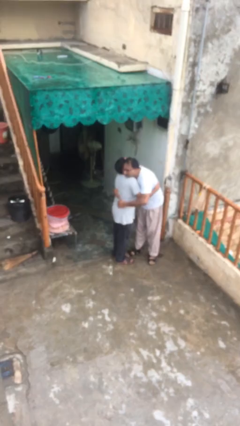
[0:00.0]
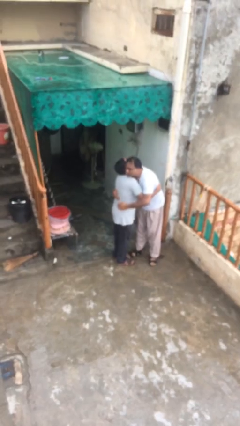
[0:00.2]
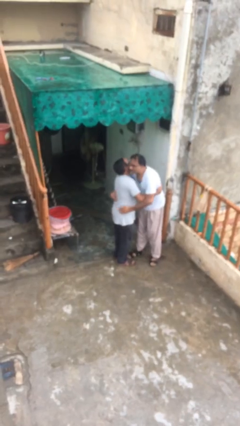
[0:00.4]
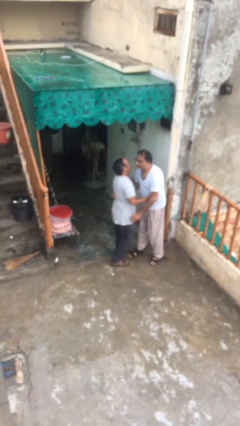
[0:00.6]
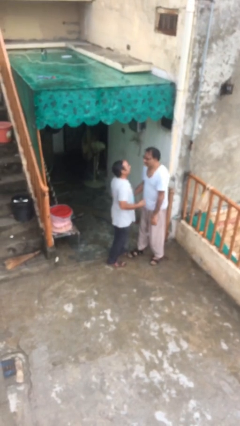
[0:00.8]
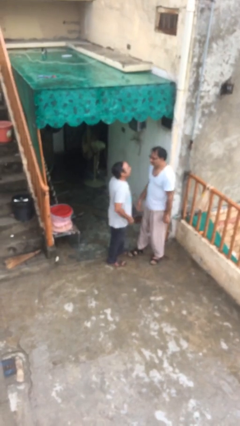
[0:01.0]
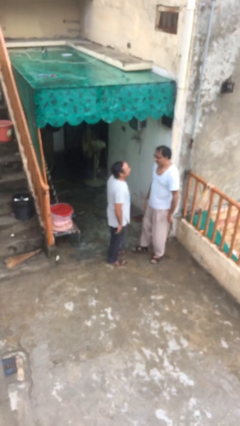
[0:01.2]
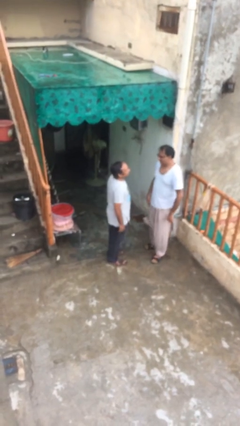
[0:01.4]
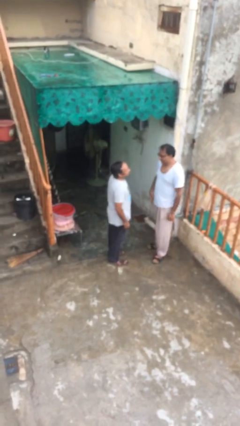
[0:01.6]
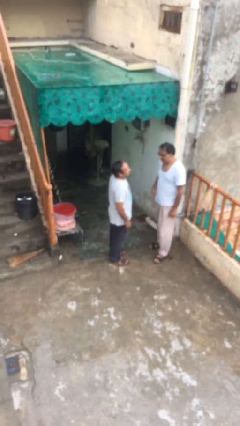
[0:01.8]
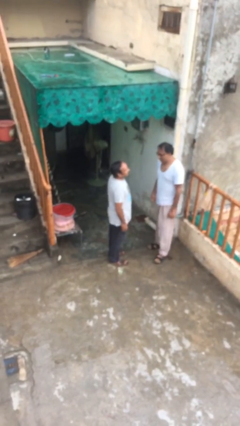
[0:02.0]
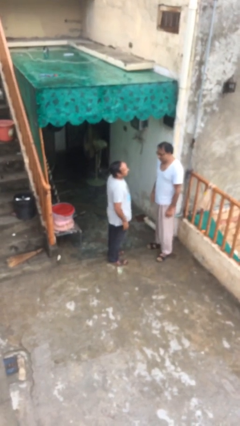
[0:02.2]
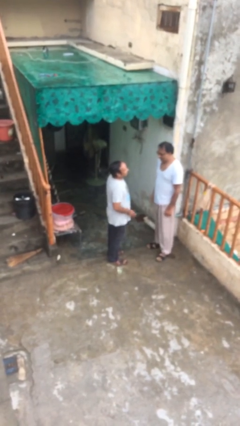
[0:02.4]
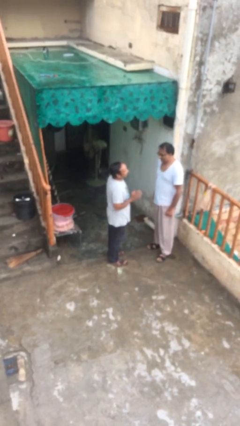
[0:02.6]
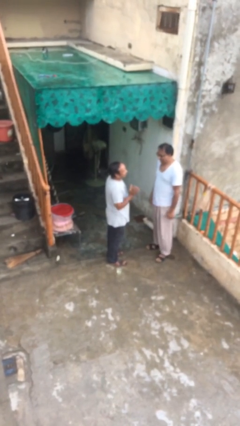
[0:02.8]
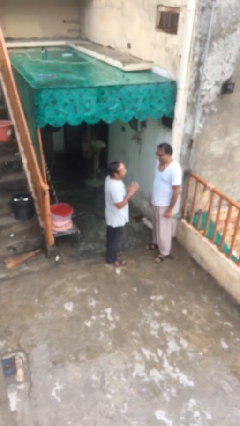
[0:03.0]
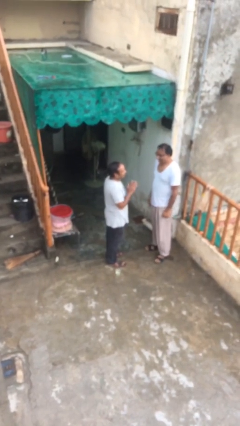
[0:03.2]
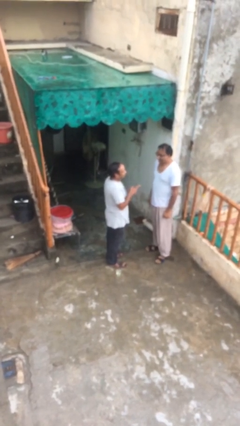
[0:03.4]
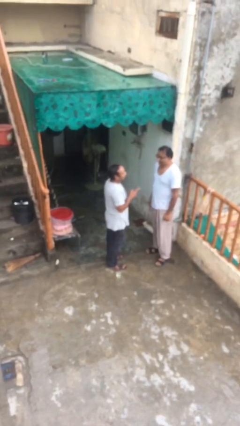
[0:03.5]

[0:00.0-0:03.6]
person talks to person

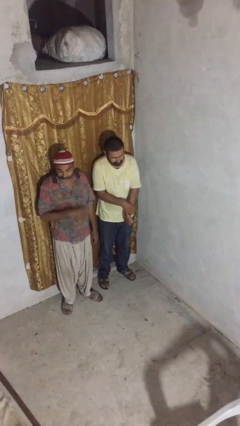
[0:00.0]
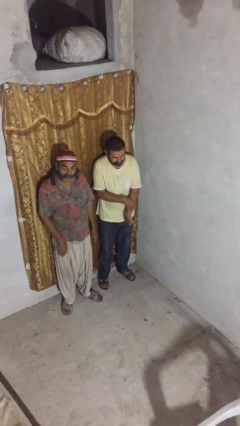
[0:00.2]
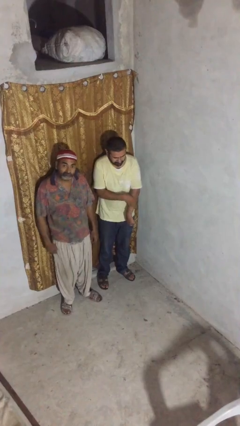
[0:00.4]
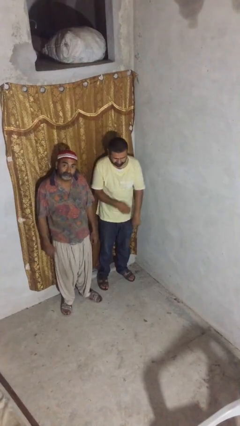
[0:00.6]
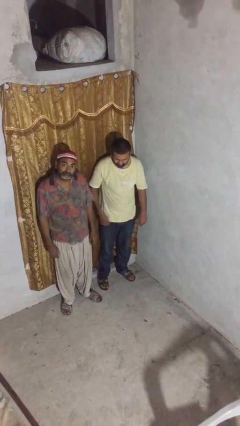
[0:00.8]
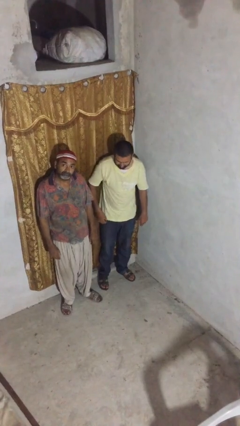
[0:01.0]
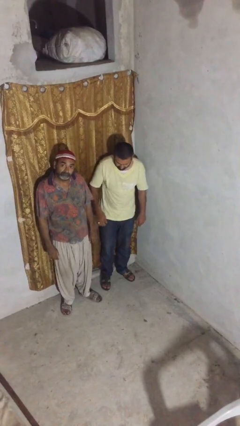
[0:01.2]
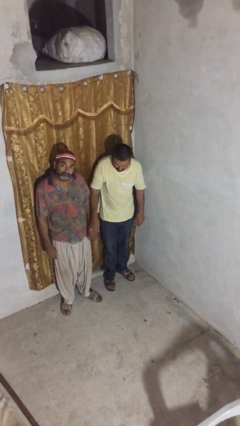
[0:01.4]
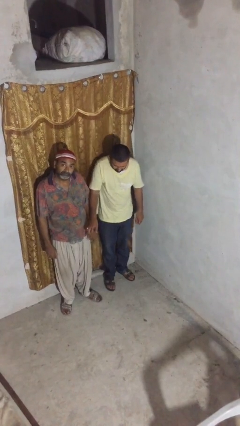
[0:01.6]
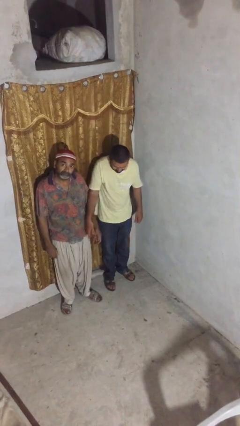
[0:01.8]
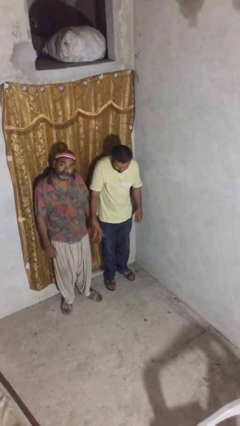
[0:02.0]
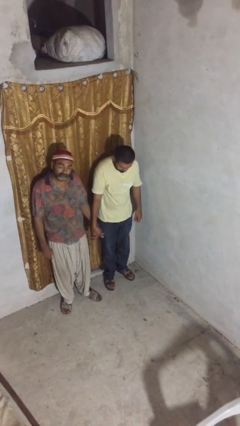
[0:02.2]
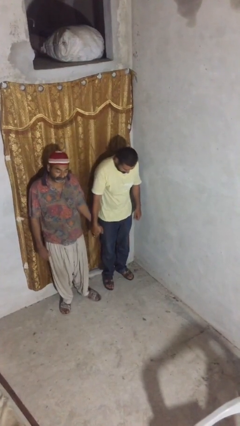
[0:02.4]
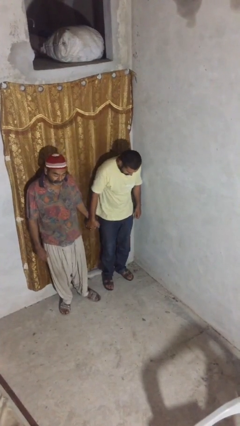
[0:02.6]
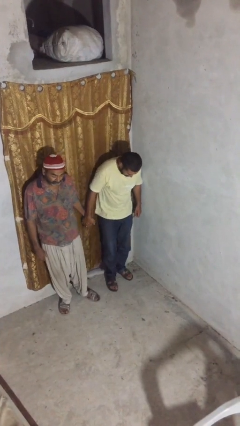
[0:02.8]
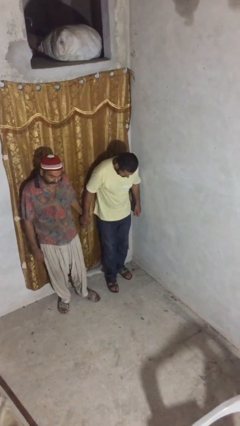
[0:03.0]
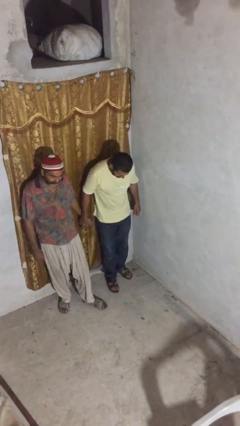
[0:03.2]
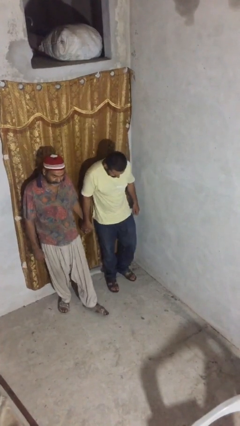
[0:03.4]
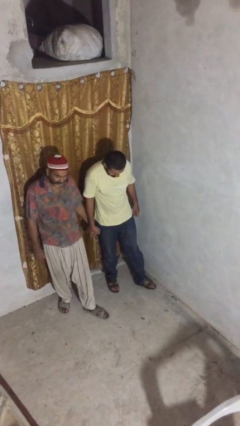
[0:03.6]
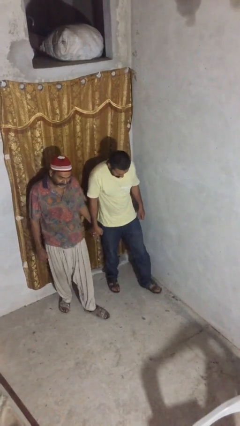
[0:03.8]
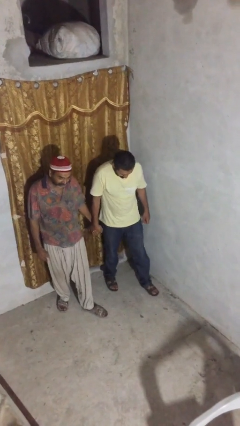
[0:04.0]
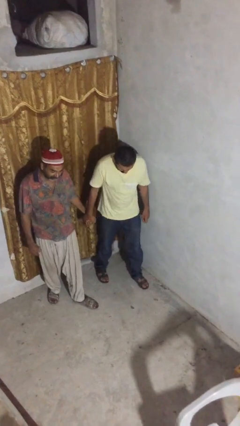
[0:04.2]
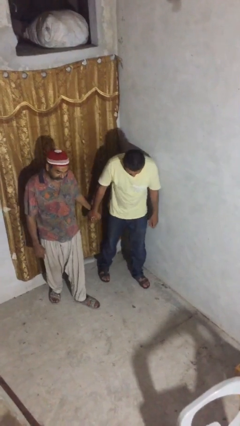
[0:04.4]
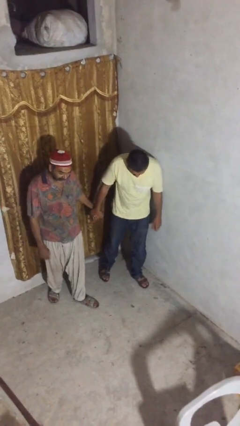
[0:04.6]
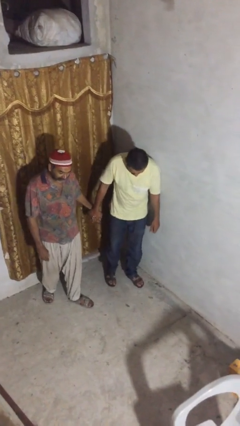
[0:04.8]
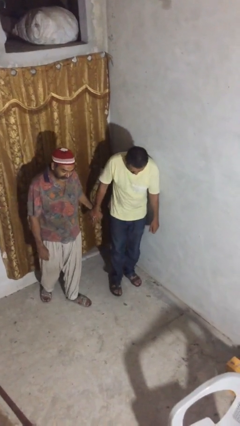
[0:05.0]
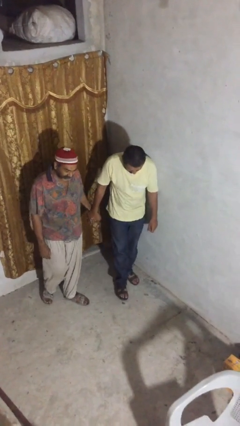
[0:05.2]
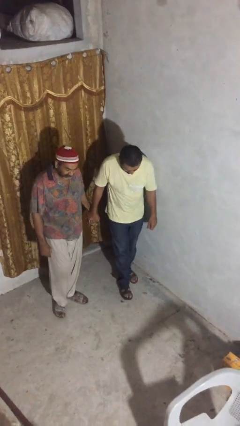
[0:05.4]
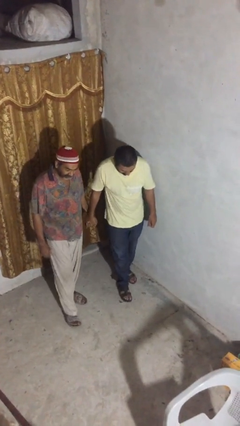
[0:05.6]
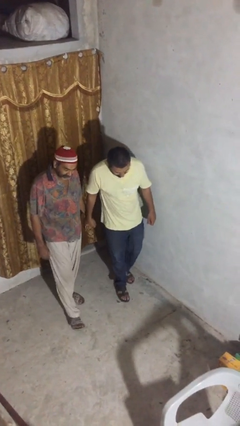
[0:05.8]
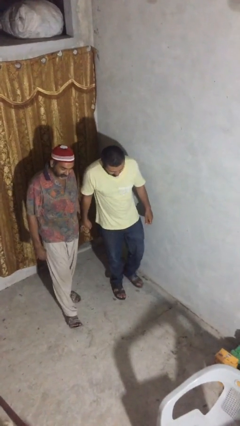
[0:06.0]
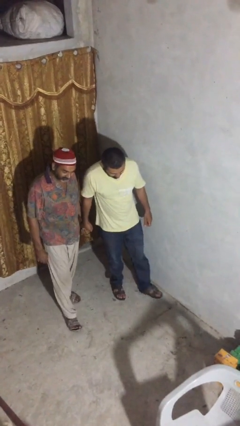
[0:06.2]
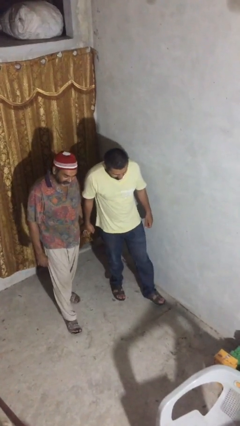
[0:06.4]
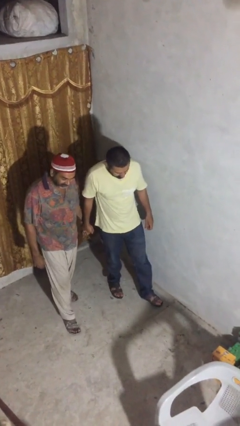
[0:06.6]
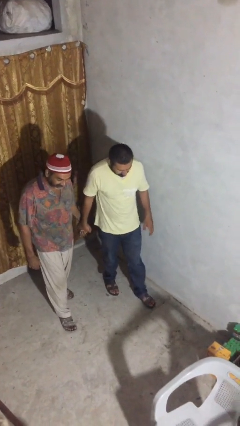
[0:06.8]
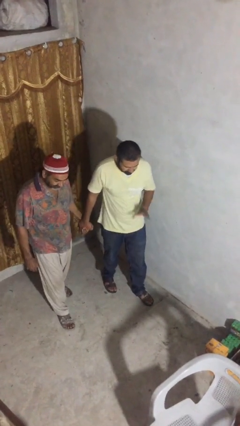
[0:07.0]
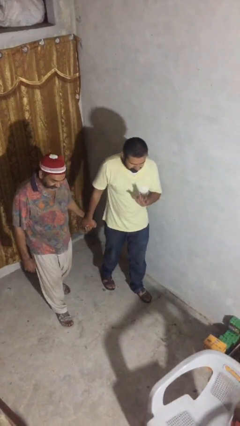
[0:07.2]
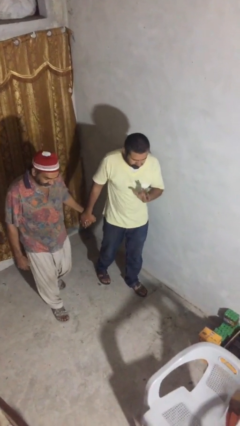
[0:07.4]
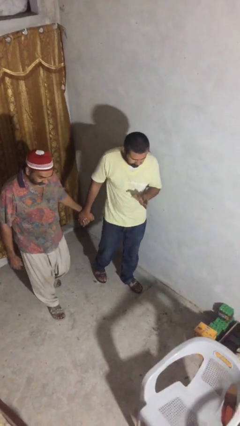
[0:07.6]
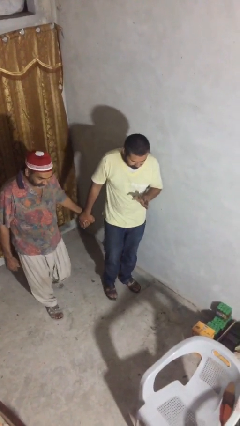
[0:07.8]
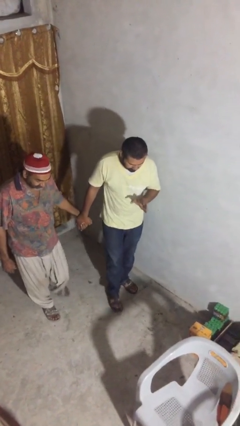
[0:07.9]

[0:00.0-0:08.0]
person holds hand

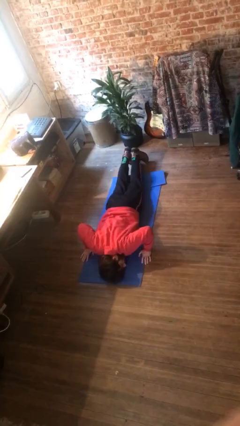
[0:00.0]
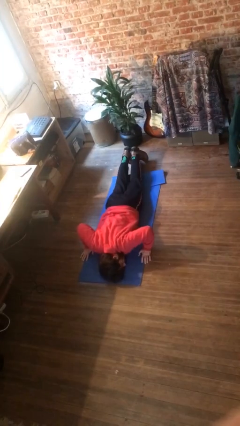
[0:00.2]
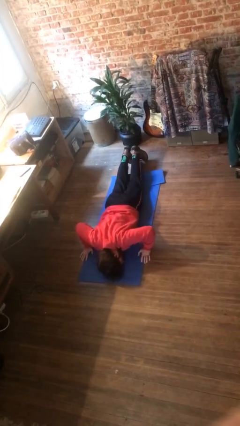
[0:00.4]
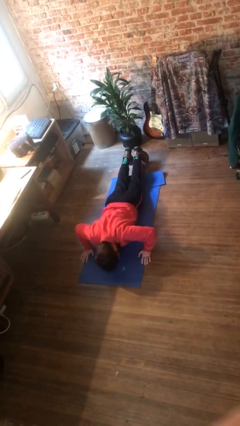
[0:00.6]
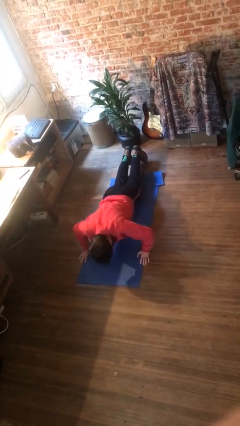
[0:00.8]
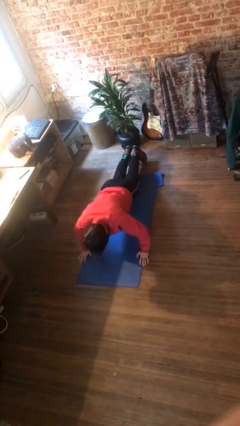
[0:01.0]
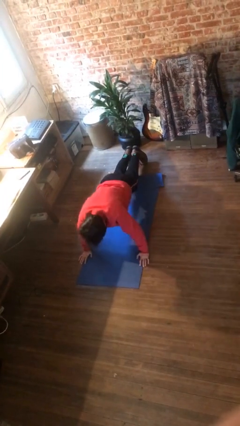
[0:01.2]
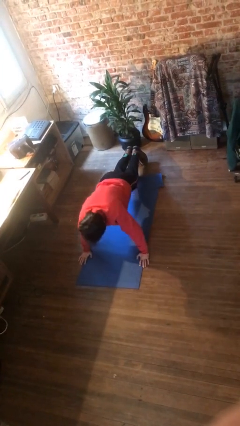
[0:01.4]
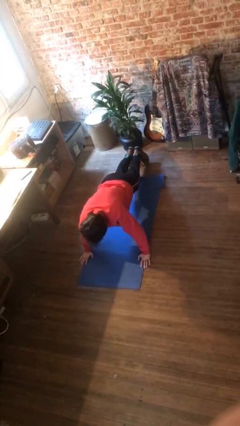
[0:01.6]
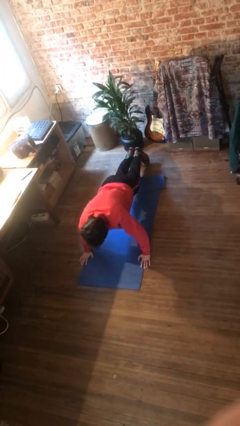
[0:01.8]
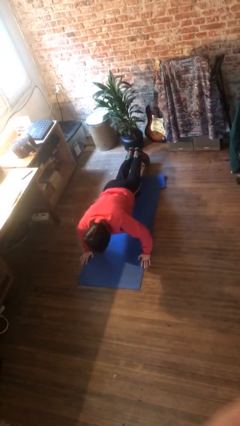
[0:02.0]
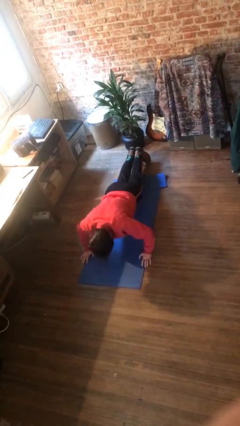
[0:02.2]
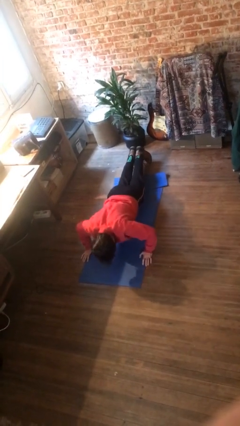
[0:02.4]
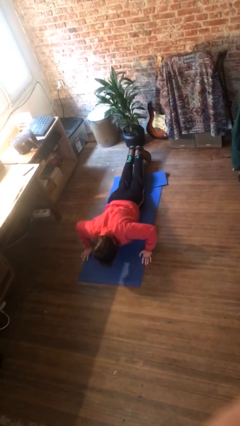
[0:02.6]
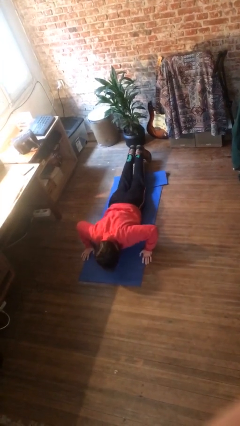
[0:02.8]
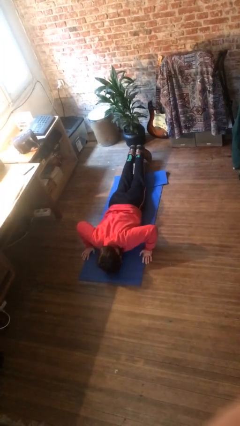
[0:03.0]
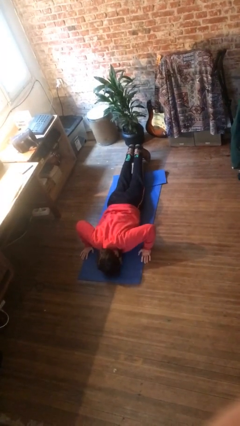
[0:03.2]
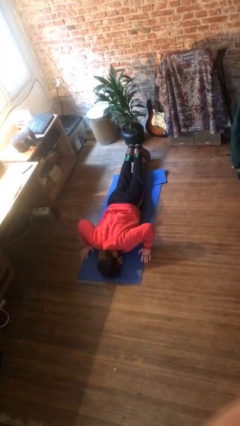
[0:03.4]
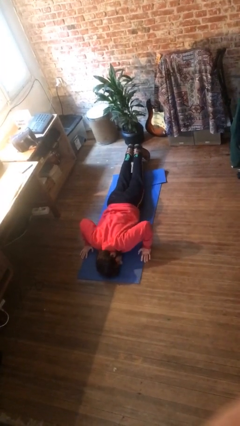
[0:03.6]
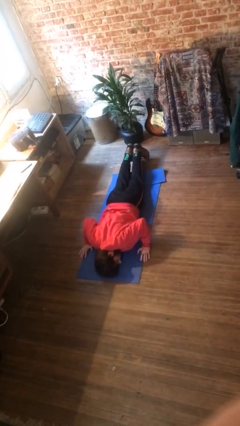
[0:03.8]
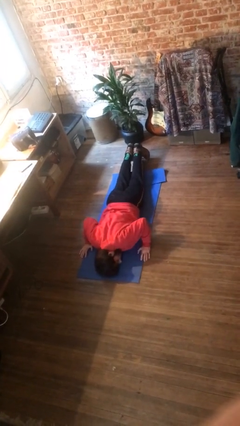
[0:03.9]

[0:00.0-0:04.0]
person exercises with pushup

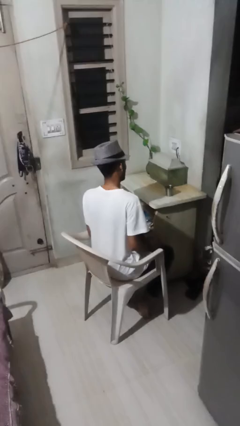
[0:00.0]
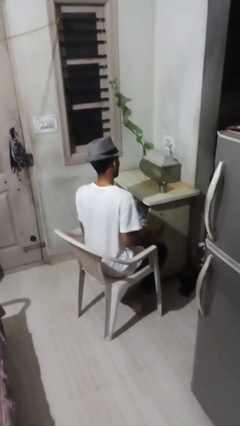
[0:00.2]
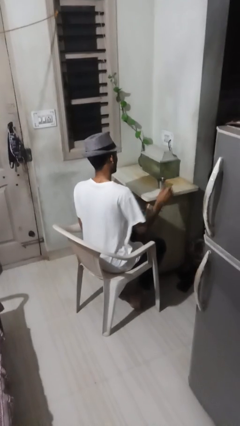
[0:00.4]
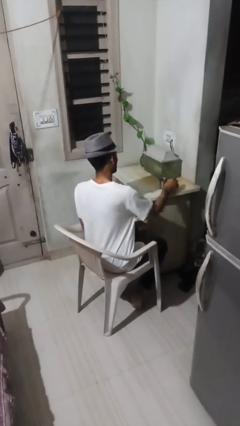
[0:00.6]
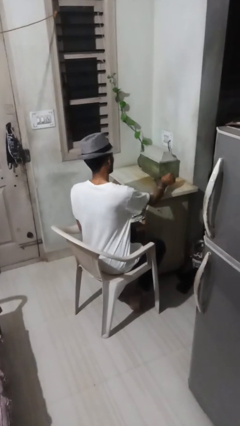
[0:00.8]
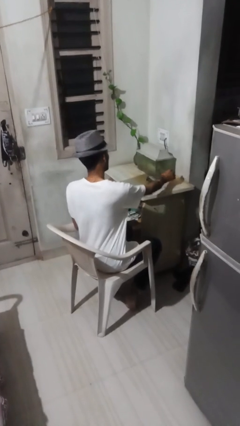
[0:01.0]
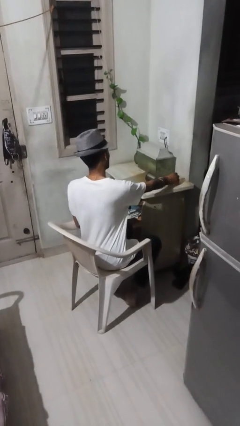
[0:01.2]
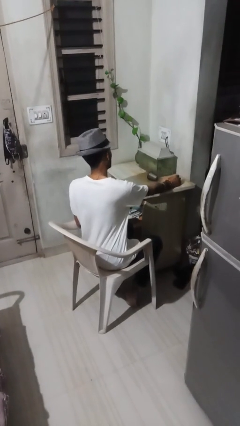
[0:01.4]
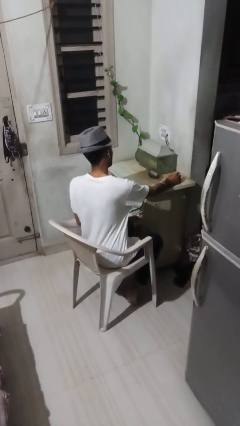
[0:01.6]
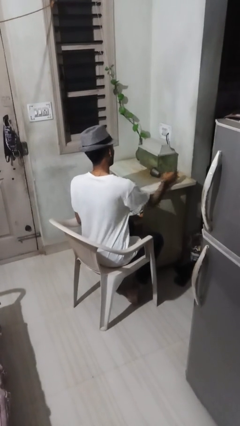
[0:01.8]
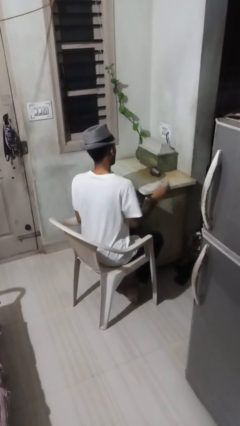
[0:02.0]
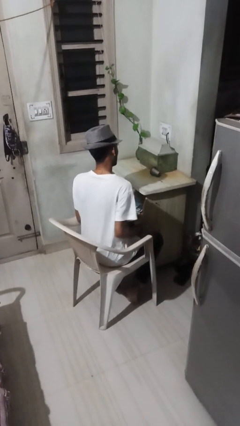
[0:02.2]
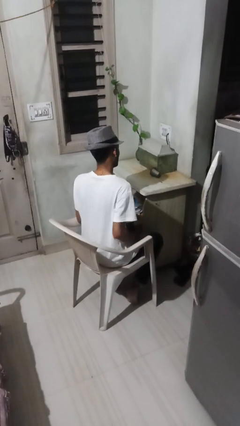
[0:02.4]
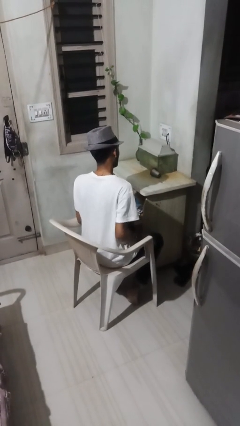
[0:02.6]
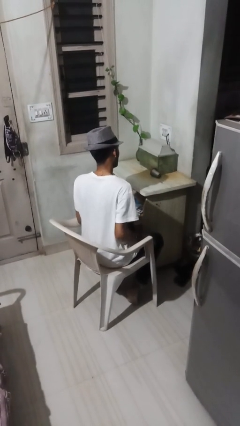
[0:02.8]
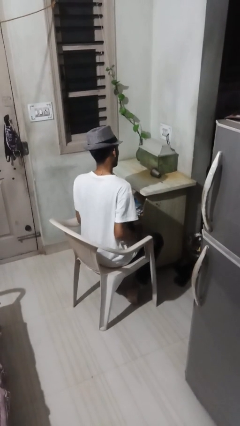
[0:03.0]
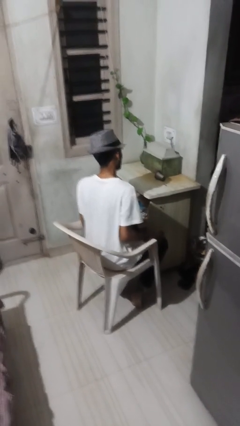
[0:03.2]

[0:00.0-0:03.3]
person knocks over glass
